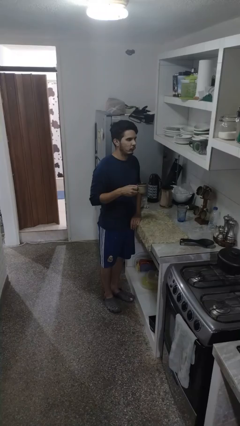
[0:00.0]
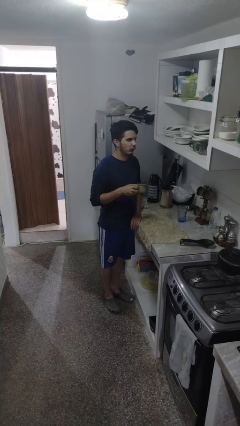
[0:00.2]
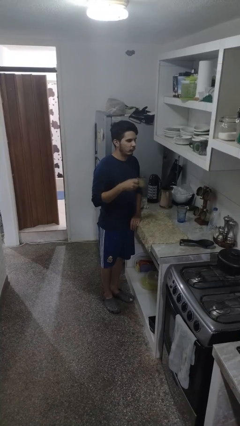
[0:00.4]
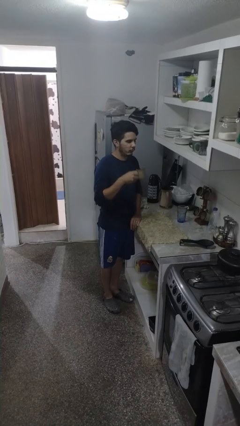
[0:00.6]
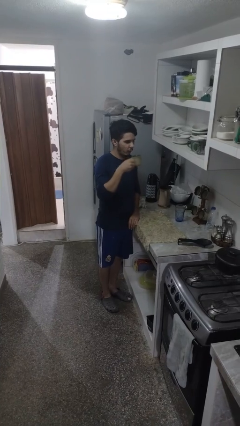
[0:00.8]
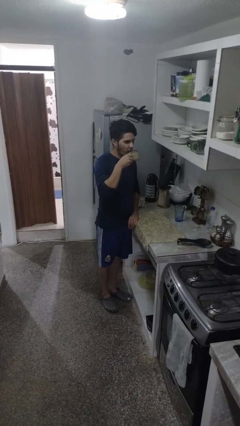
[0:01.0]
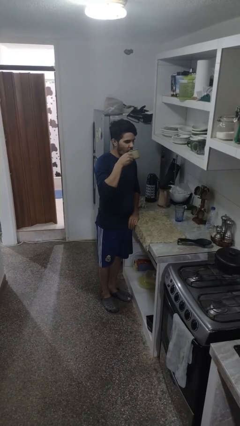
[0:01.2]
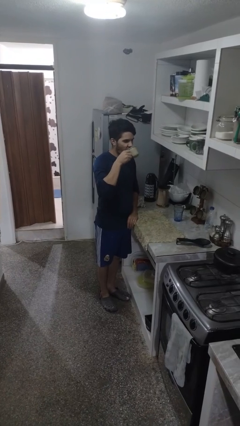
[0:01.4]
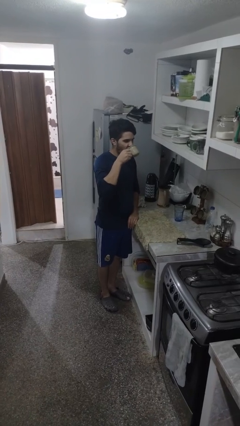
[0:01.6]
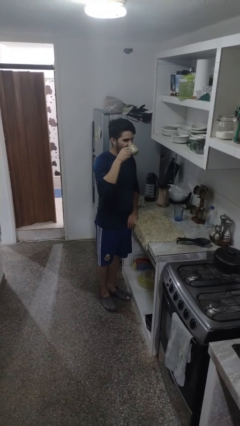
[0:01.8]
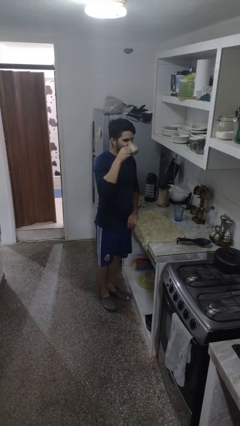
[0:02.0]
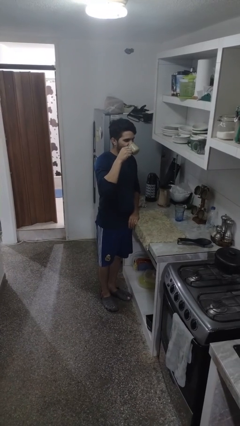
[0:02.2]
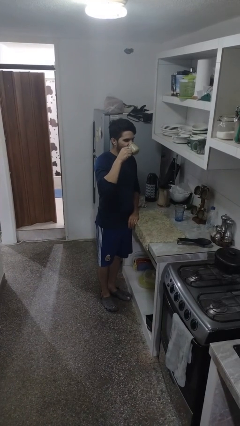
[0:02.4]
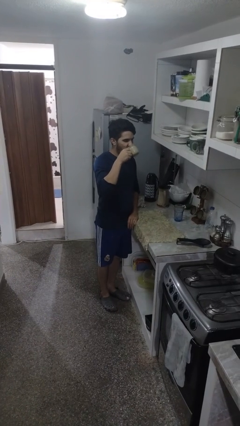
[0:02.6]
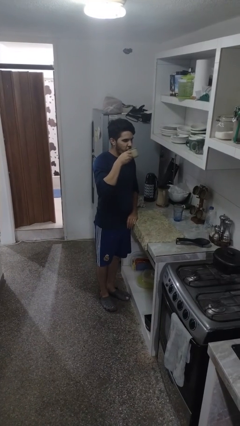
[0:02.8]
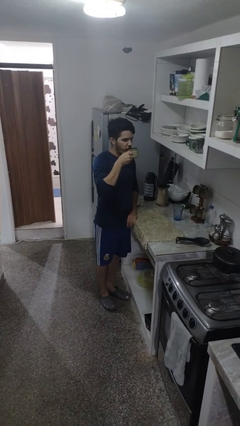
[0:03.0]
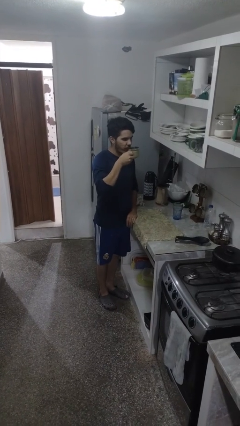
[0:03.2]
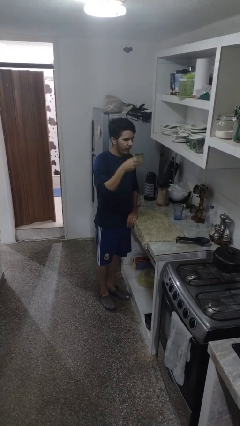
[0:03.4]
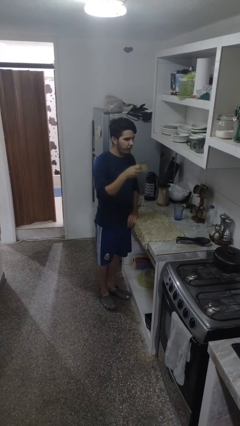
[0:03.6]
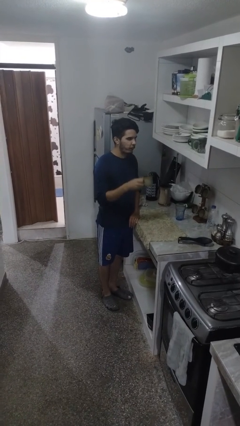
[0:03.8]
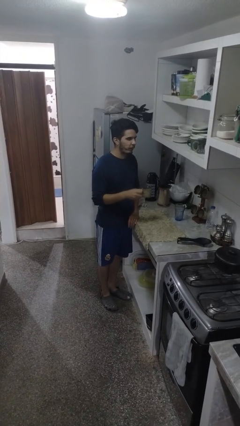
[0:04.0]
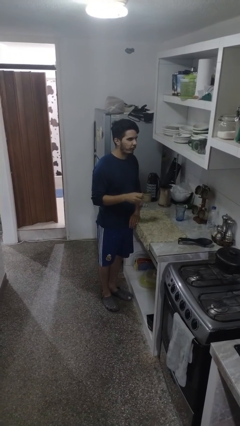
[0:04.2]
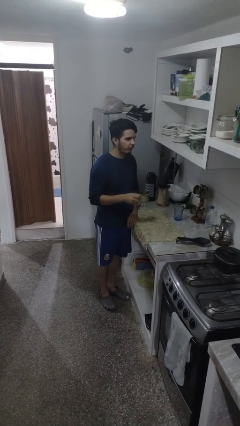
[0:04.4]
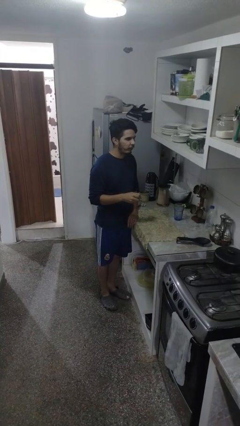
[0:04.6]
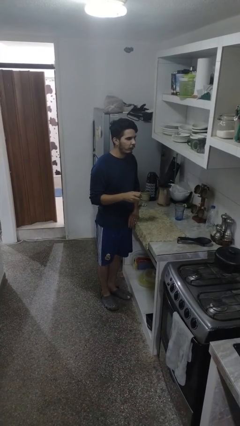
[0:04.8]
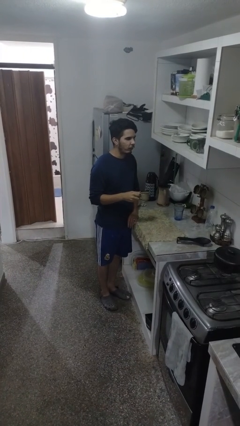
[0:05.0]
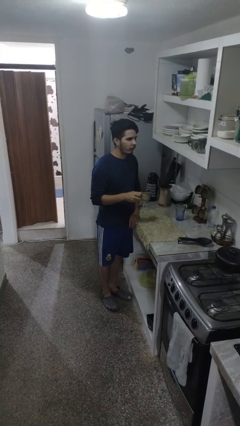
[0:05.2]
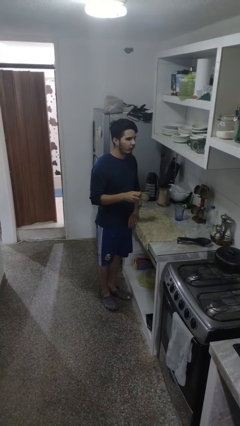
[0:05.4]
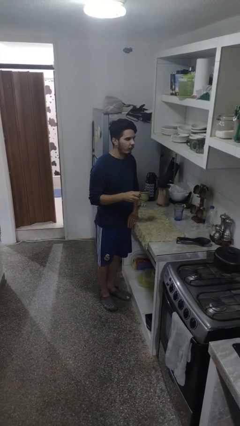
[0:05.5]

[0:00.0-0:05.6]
person drinks from mug

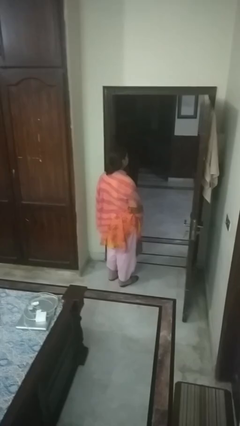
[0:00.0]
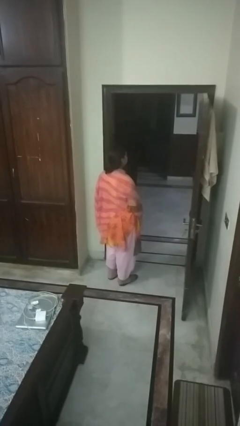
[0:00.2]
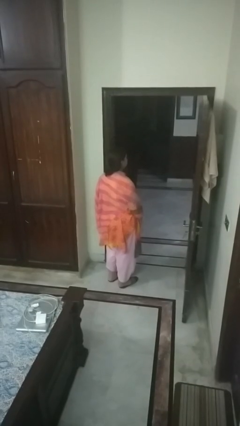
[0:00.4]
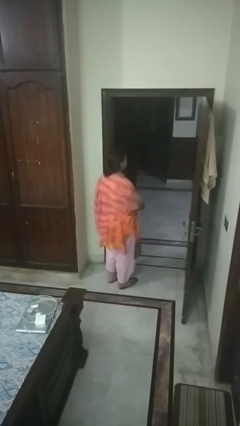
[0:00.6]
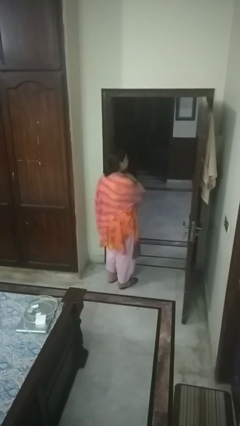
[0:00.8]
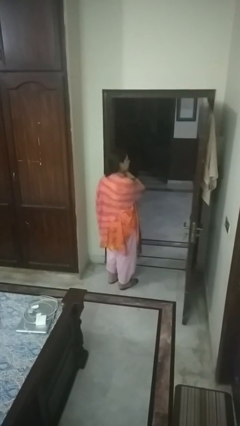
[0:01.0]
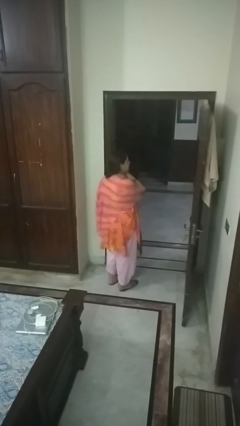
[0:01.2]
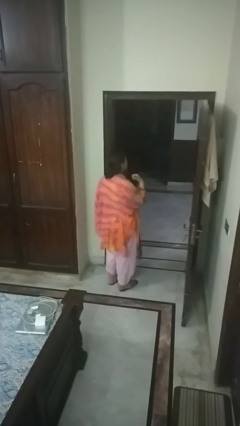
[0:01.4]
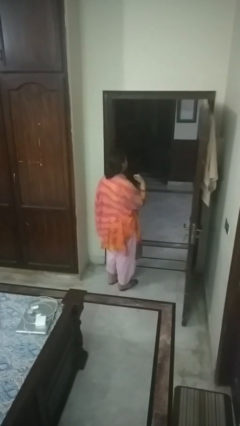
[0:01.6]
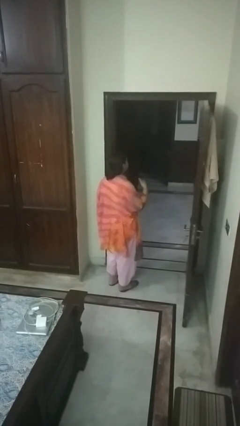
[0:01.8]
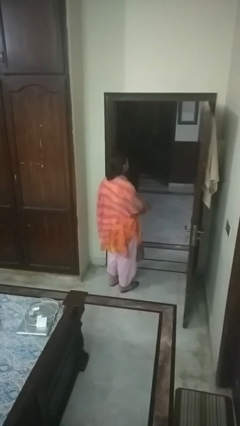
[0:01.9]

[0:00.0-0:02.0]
person gestures cut

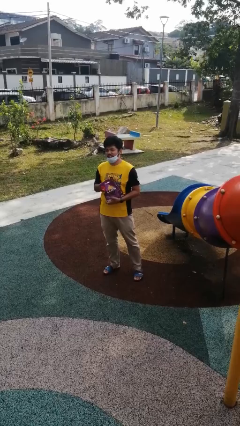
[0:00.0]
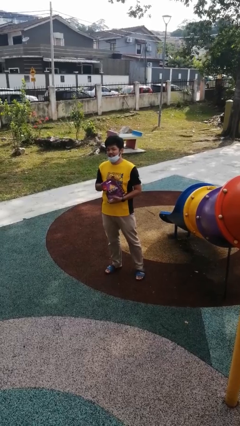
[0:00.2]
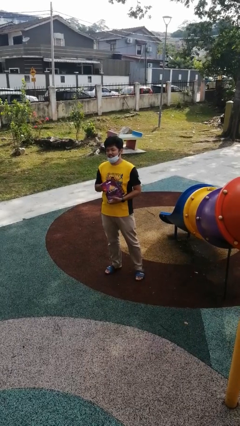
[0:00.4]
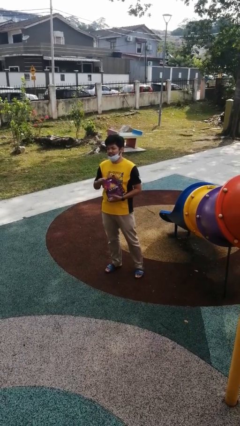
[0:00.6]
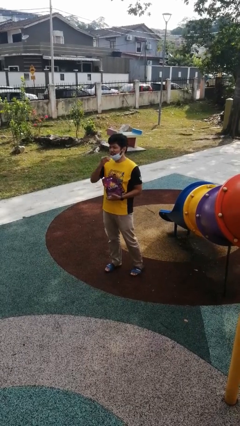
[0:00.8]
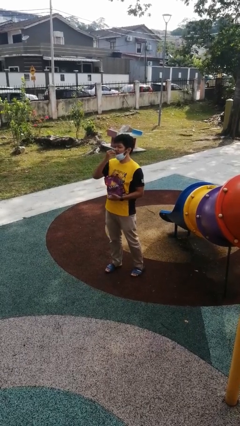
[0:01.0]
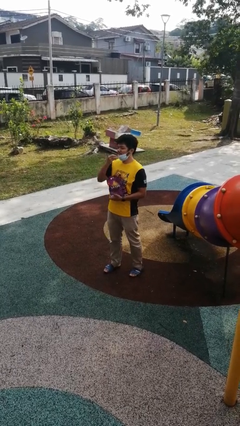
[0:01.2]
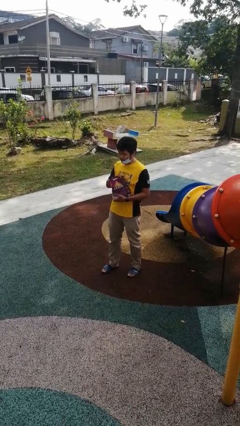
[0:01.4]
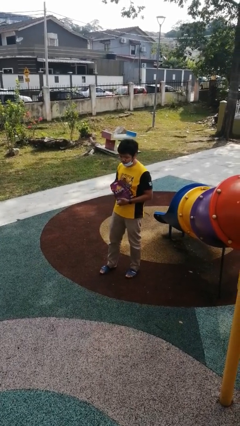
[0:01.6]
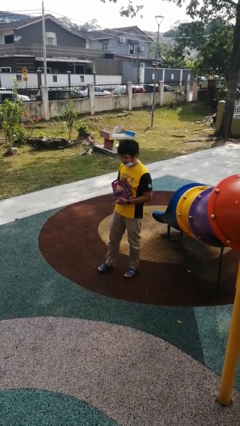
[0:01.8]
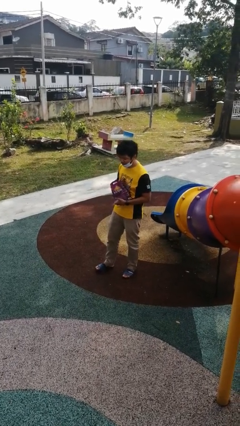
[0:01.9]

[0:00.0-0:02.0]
person eats snack from bag

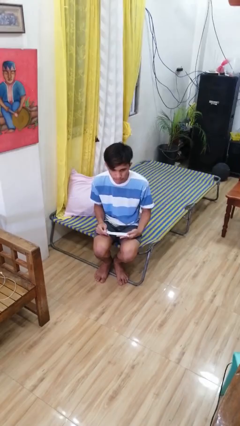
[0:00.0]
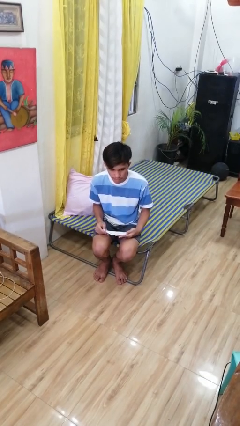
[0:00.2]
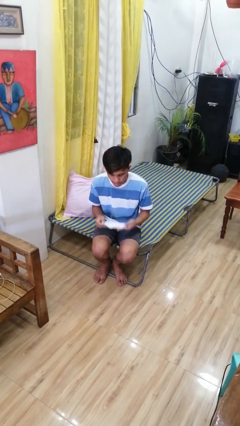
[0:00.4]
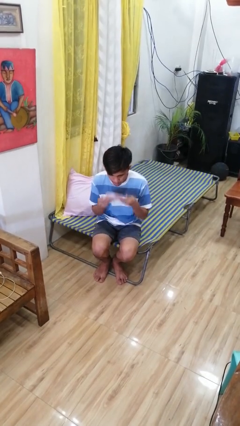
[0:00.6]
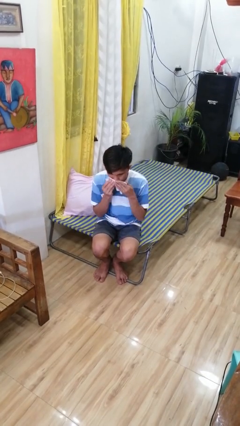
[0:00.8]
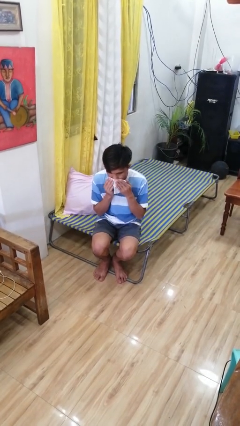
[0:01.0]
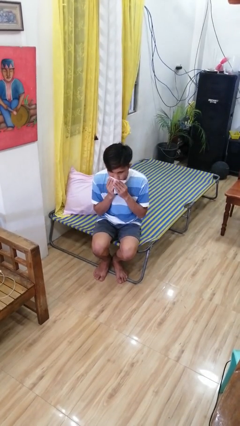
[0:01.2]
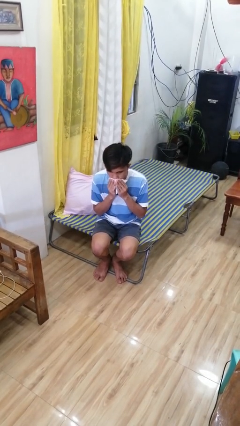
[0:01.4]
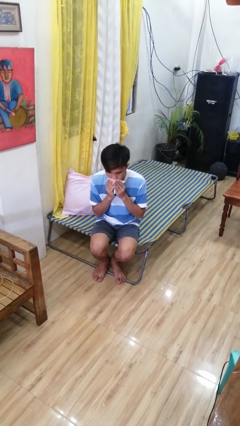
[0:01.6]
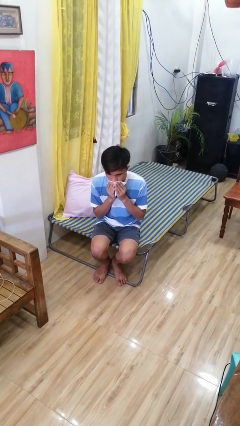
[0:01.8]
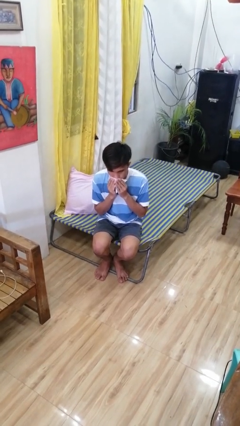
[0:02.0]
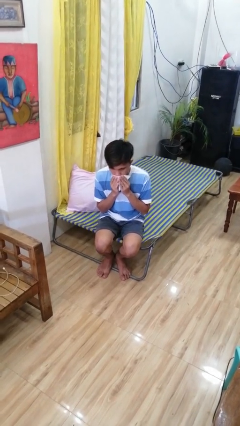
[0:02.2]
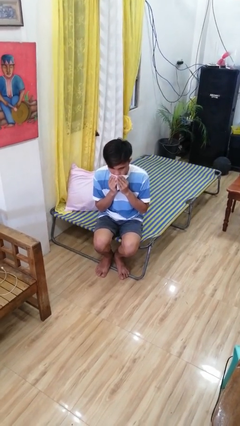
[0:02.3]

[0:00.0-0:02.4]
person wipes mouth with napkin

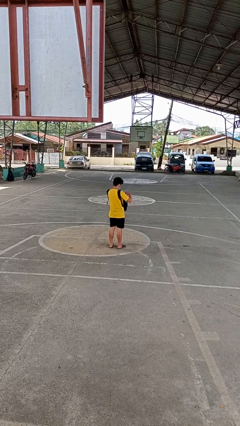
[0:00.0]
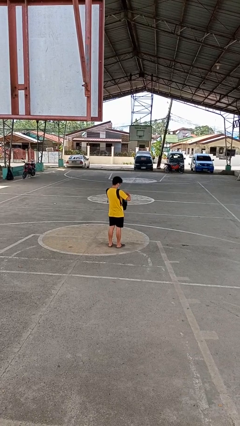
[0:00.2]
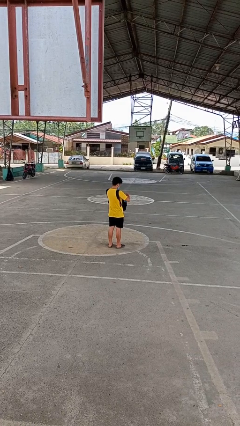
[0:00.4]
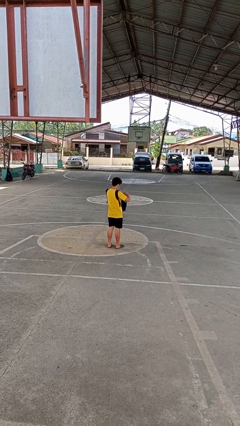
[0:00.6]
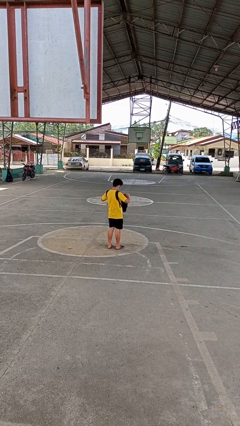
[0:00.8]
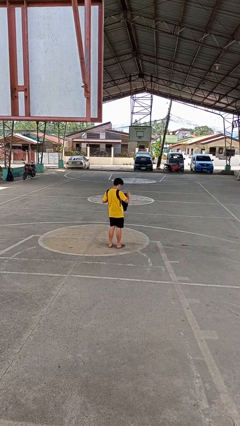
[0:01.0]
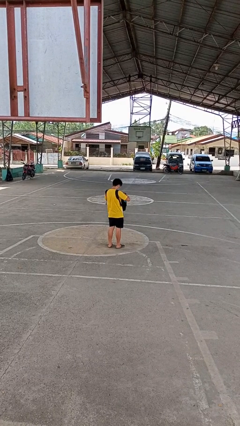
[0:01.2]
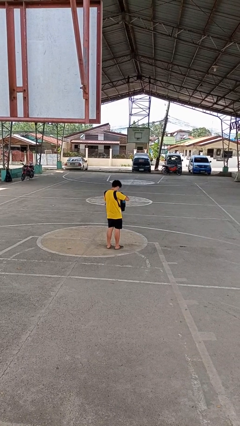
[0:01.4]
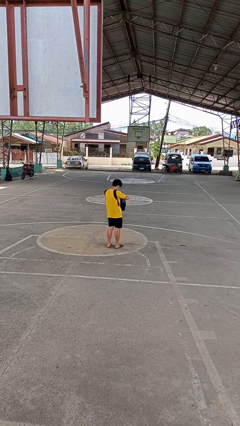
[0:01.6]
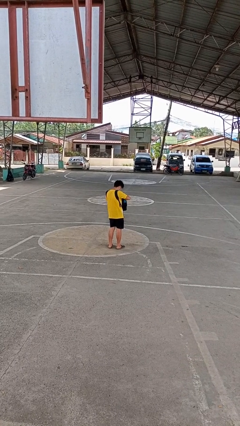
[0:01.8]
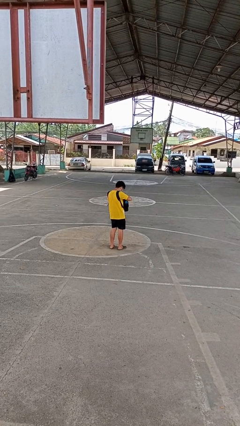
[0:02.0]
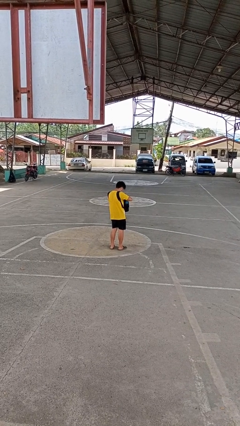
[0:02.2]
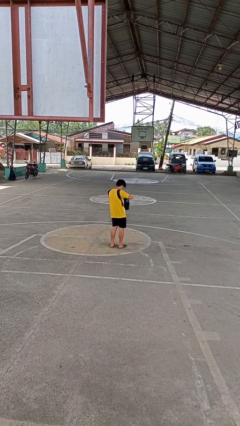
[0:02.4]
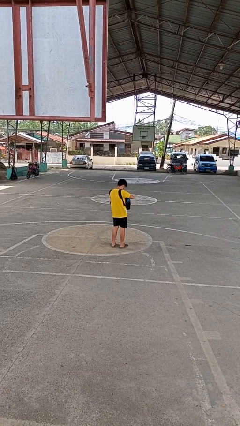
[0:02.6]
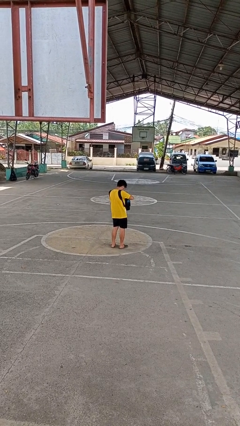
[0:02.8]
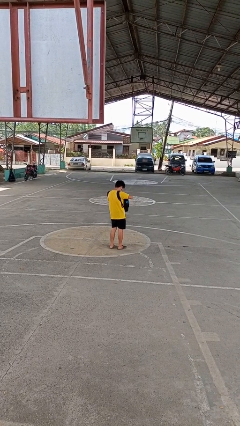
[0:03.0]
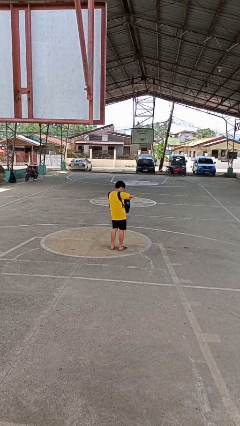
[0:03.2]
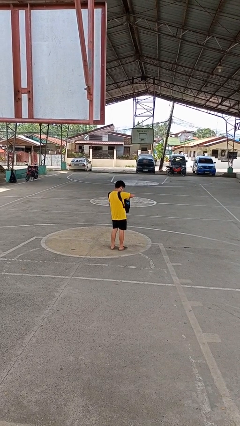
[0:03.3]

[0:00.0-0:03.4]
person searches in backpack

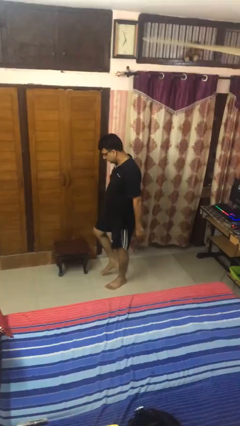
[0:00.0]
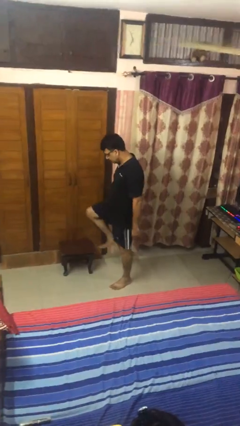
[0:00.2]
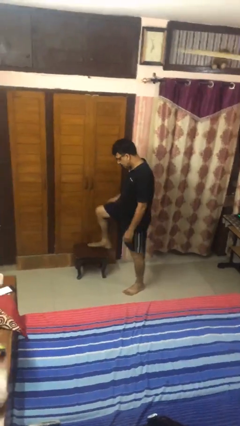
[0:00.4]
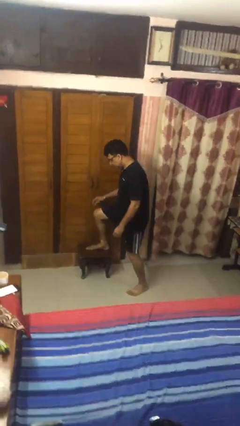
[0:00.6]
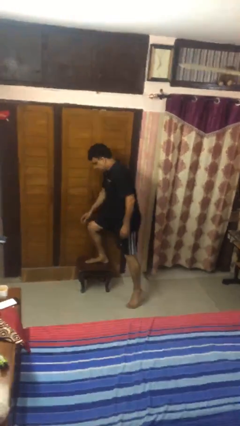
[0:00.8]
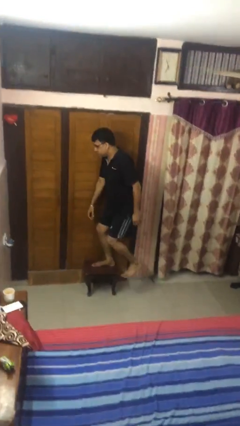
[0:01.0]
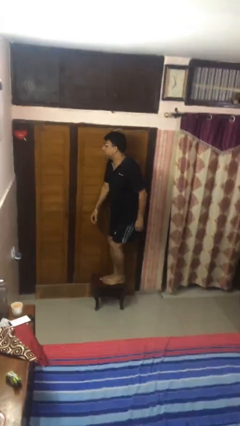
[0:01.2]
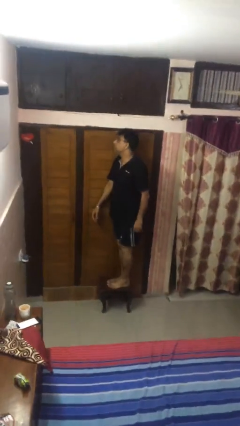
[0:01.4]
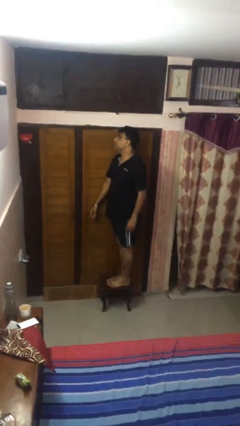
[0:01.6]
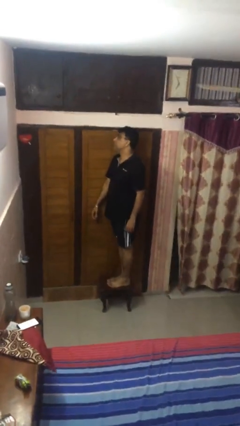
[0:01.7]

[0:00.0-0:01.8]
person climbs on table
